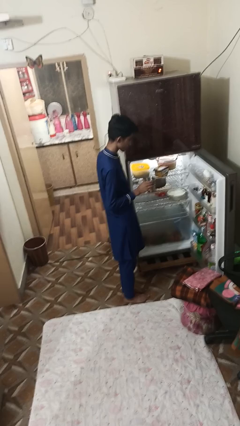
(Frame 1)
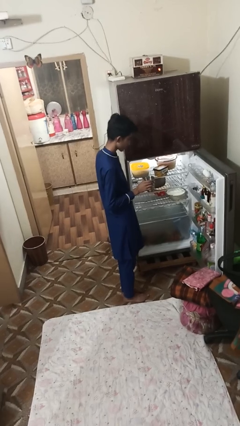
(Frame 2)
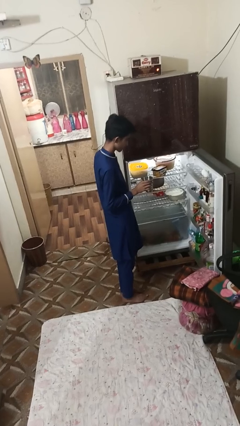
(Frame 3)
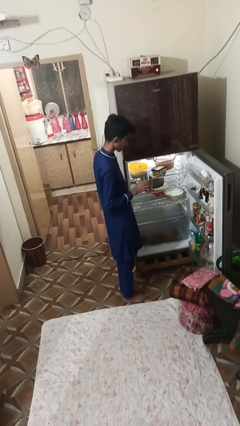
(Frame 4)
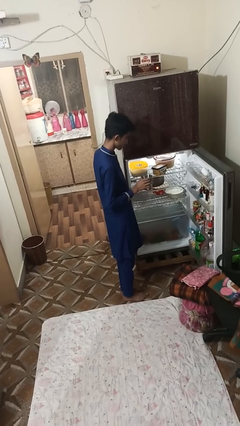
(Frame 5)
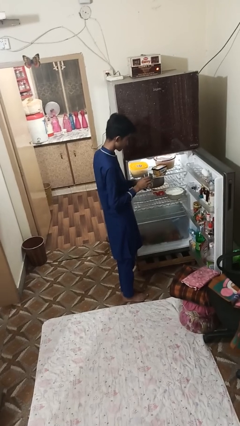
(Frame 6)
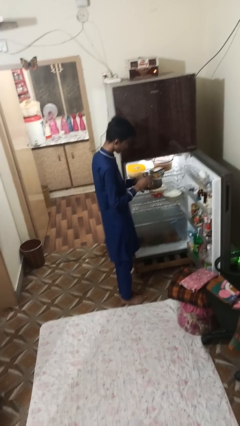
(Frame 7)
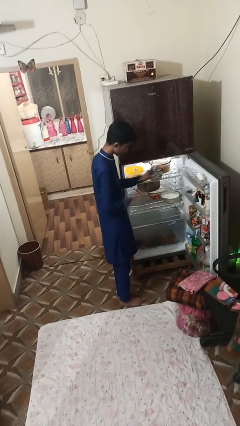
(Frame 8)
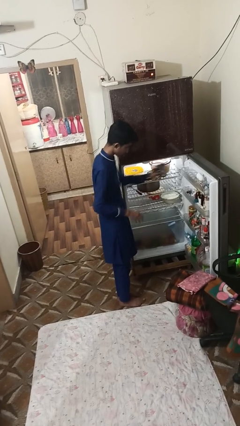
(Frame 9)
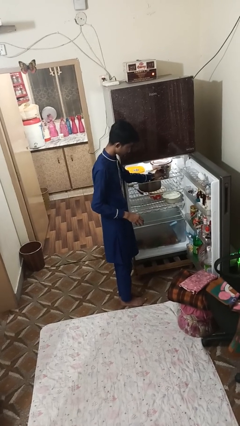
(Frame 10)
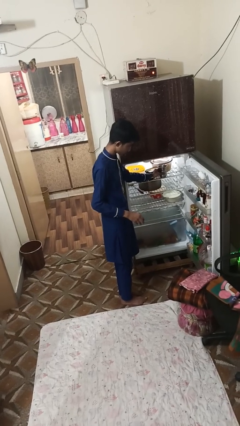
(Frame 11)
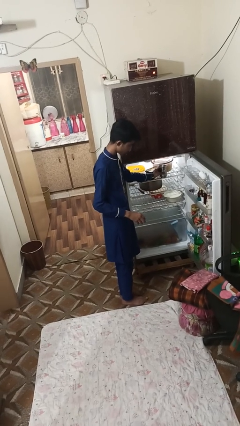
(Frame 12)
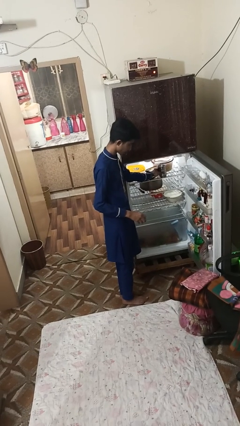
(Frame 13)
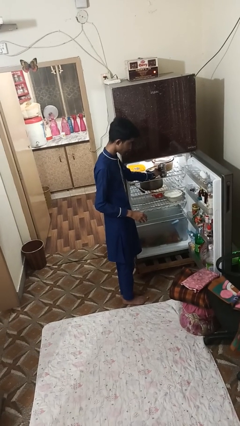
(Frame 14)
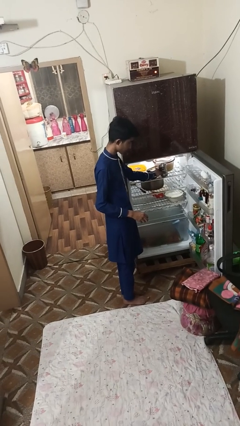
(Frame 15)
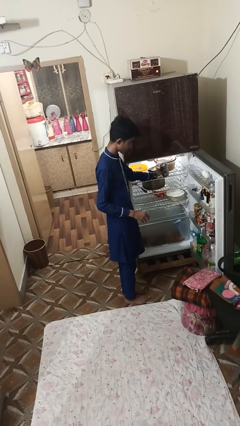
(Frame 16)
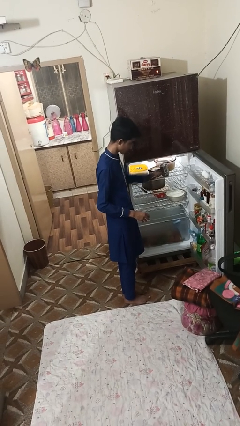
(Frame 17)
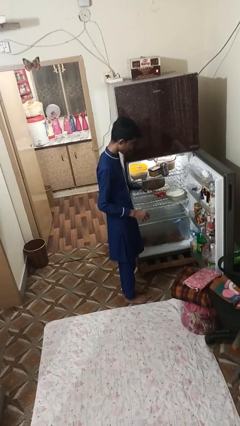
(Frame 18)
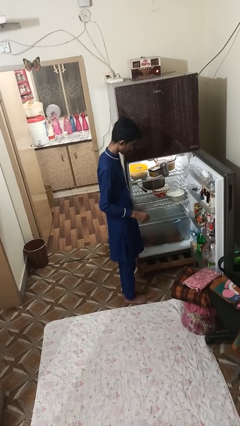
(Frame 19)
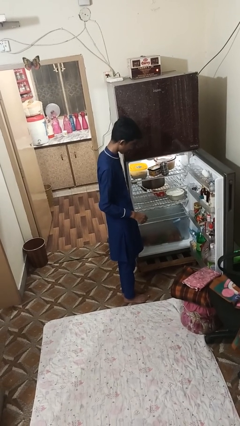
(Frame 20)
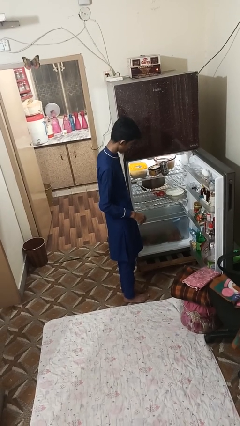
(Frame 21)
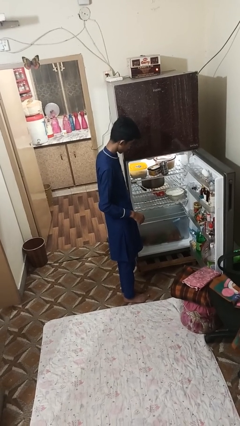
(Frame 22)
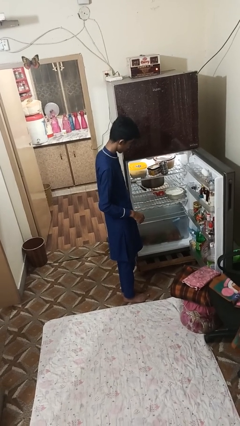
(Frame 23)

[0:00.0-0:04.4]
person puts object into refrigerator

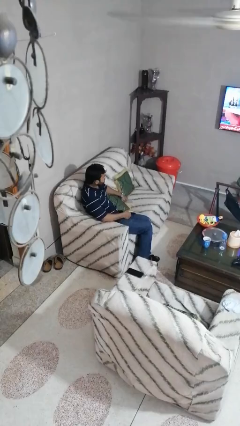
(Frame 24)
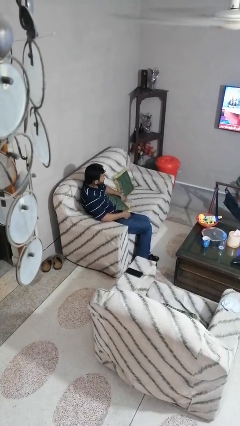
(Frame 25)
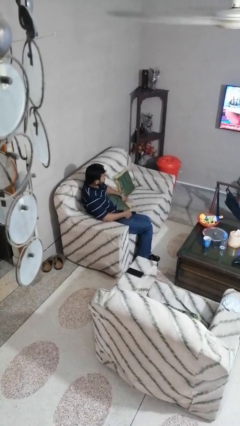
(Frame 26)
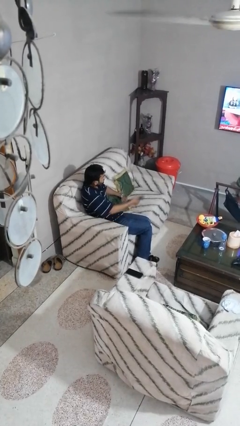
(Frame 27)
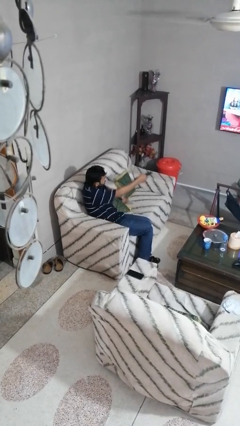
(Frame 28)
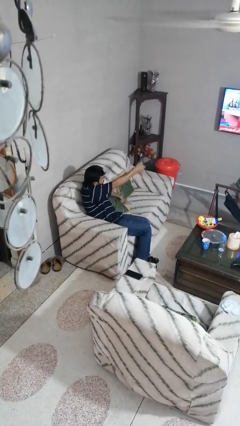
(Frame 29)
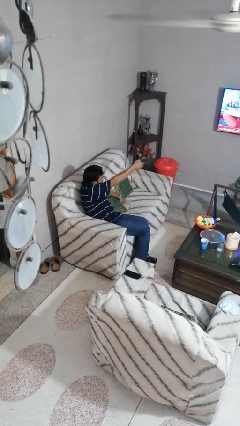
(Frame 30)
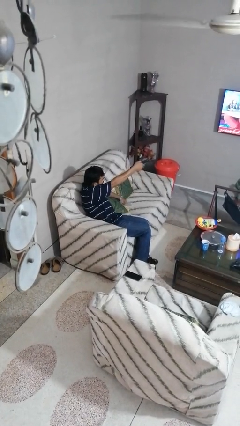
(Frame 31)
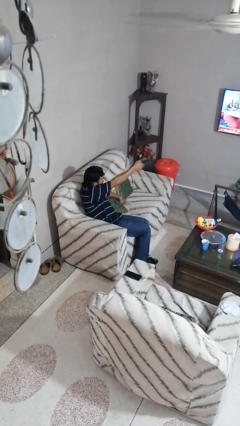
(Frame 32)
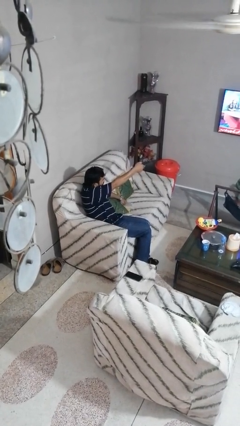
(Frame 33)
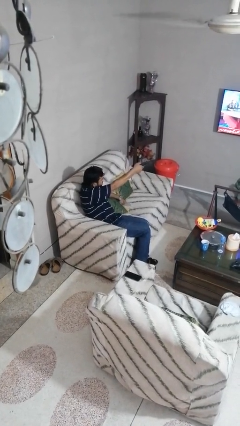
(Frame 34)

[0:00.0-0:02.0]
person uses television remote

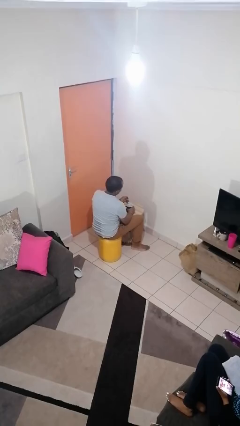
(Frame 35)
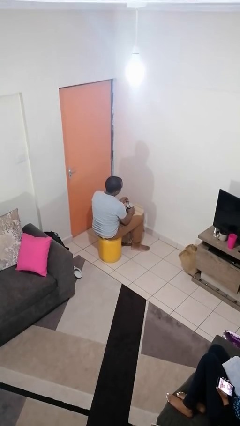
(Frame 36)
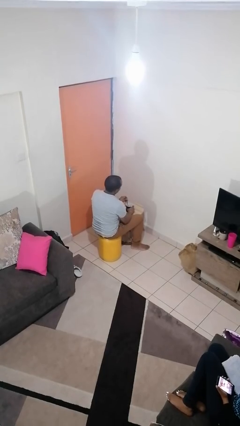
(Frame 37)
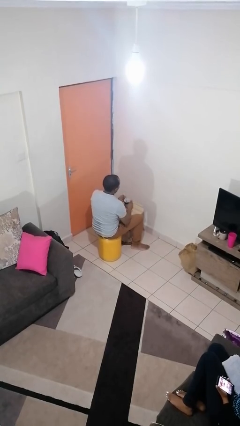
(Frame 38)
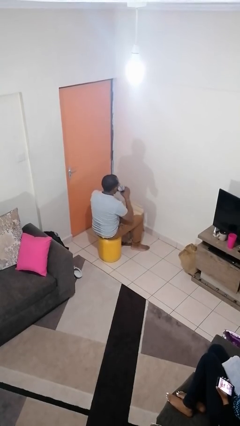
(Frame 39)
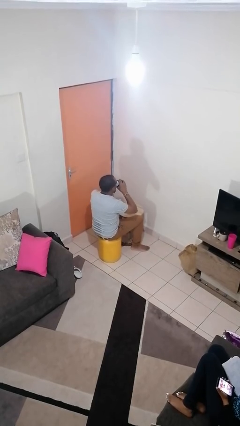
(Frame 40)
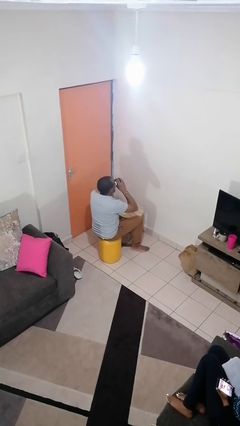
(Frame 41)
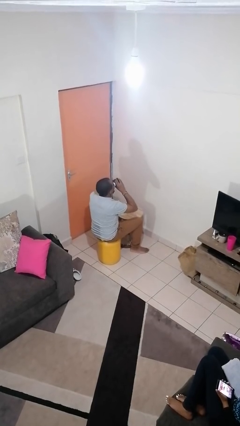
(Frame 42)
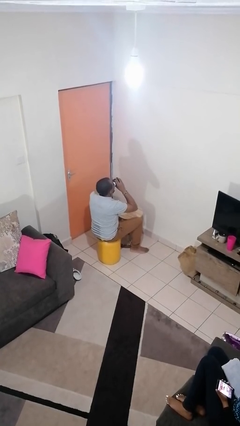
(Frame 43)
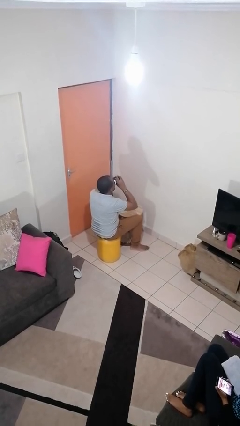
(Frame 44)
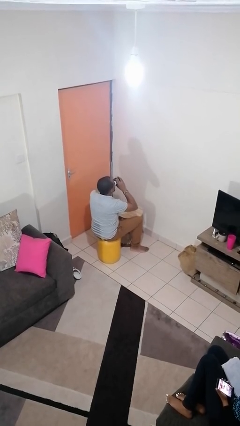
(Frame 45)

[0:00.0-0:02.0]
person drinks from mug

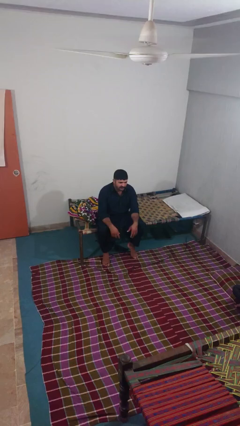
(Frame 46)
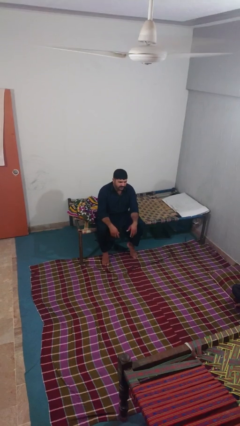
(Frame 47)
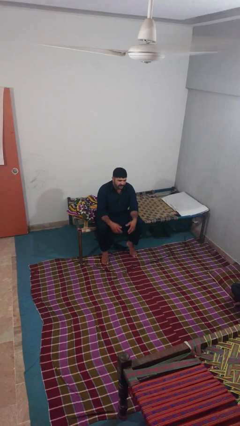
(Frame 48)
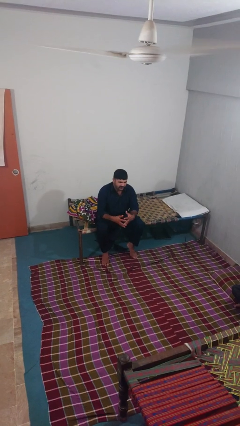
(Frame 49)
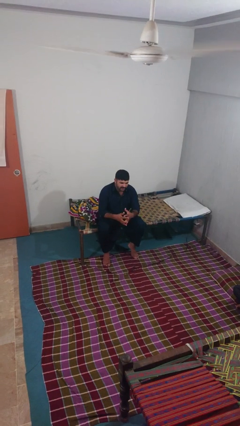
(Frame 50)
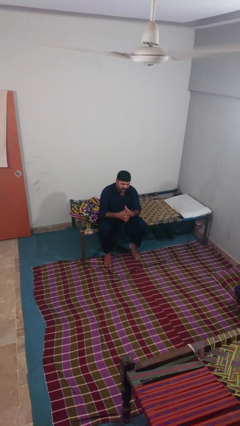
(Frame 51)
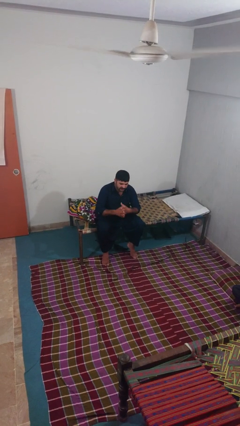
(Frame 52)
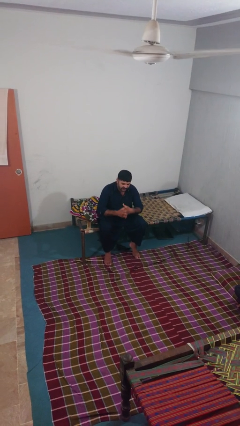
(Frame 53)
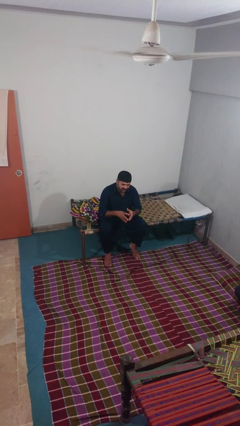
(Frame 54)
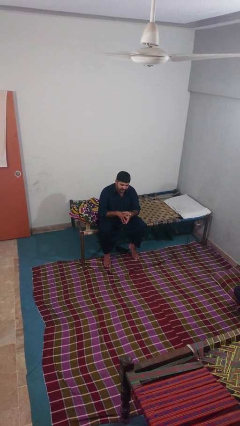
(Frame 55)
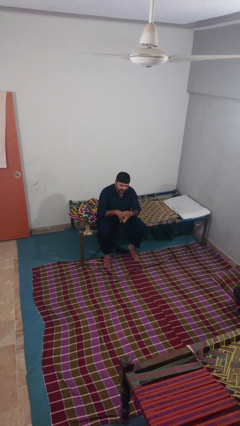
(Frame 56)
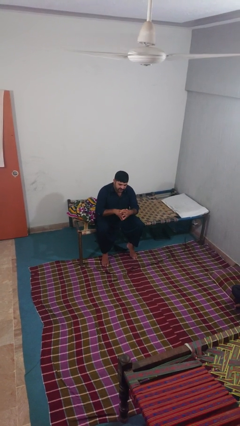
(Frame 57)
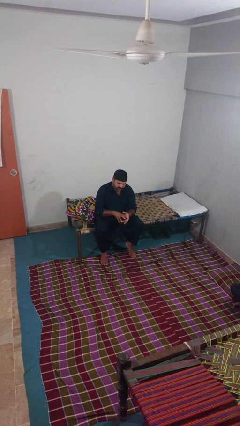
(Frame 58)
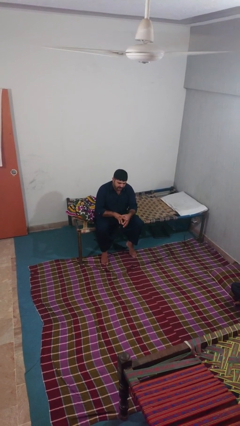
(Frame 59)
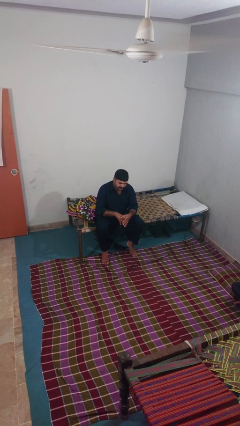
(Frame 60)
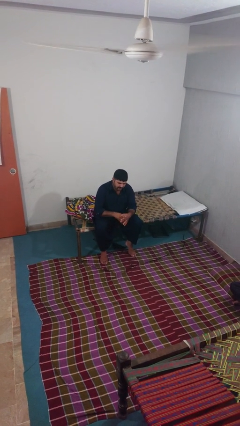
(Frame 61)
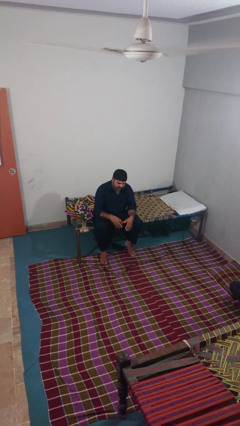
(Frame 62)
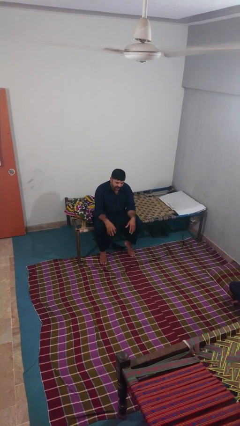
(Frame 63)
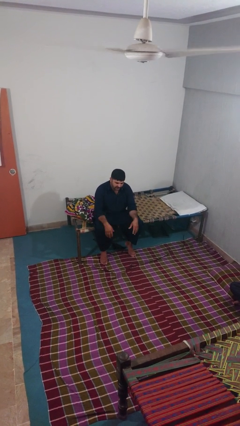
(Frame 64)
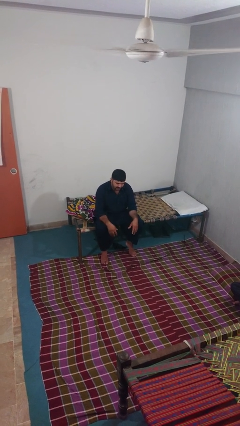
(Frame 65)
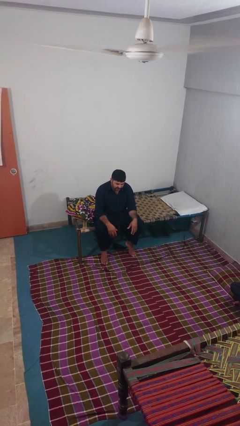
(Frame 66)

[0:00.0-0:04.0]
person cracks knuckles

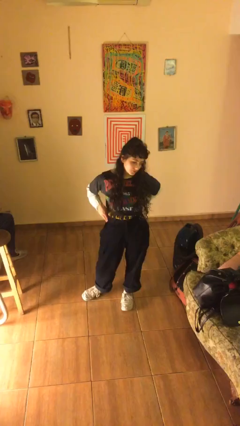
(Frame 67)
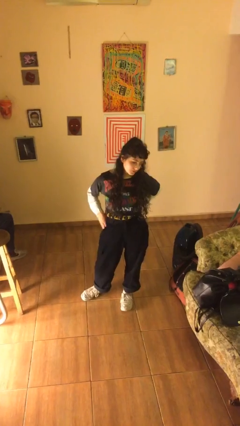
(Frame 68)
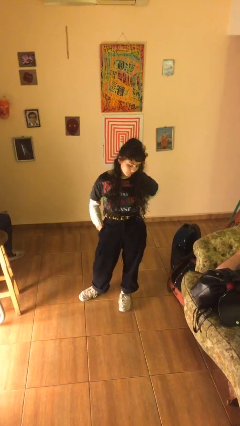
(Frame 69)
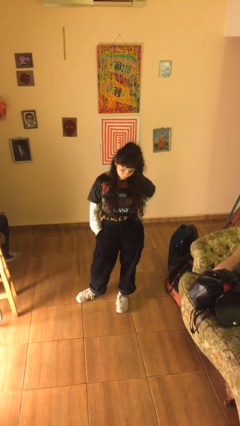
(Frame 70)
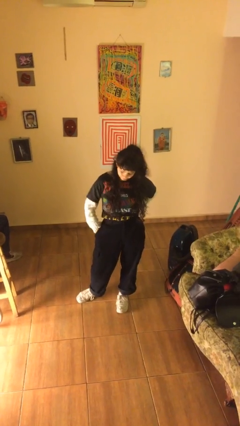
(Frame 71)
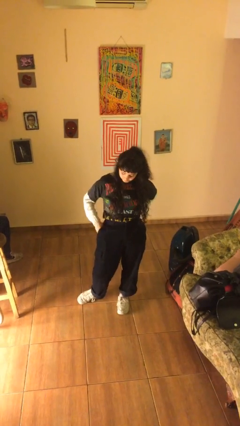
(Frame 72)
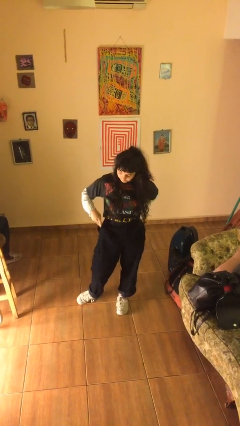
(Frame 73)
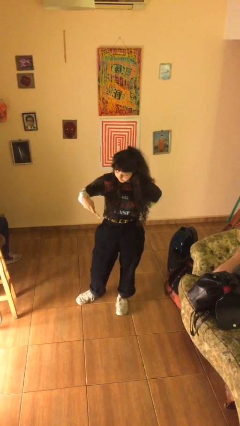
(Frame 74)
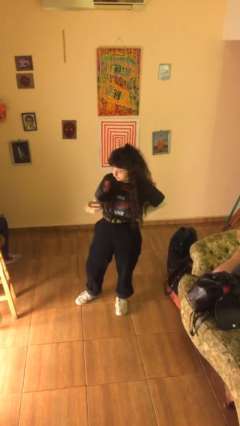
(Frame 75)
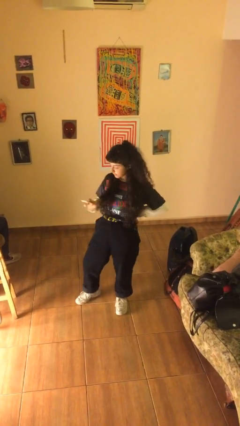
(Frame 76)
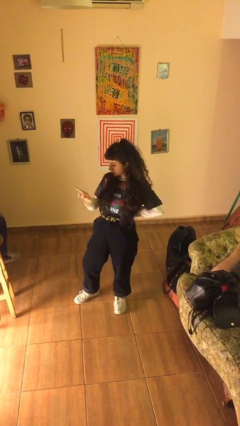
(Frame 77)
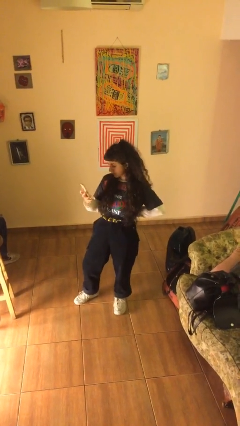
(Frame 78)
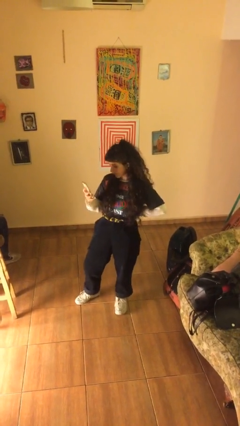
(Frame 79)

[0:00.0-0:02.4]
person takes phone from pocket

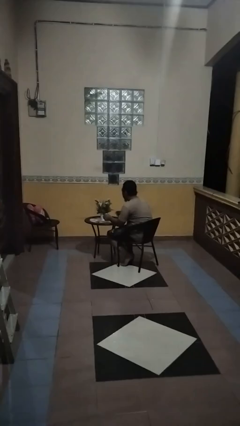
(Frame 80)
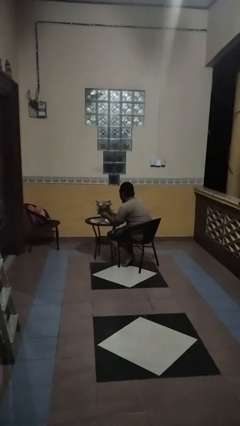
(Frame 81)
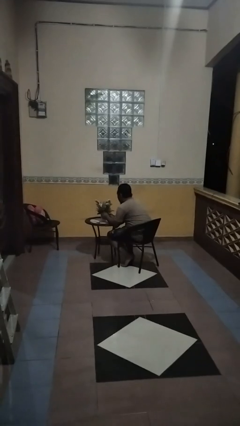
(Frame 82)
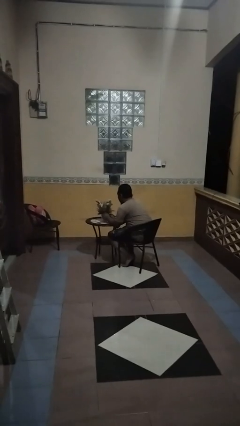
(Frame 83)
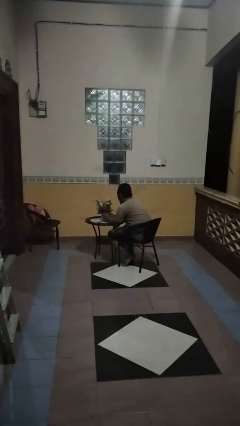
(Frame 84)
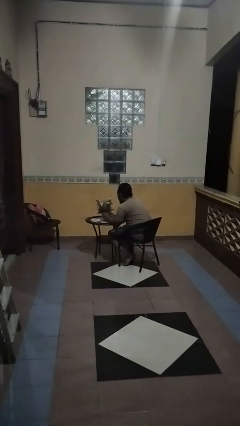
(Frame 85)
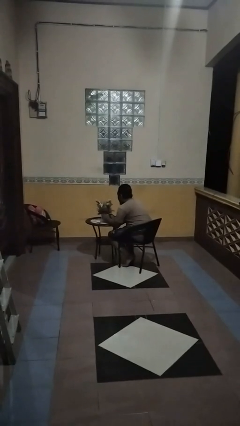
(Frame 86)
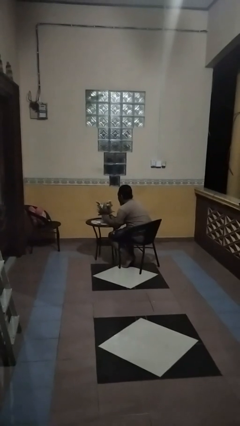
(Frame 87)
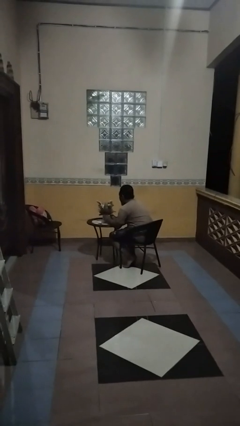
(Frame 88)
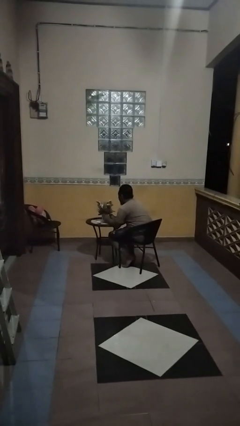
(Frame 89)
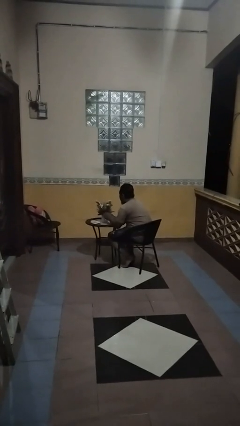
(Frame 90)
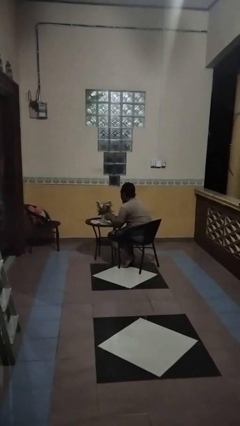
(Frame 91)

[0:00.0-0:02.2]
person arranges flowers in vase

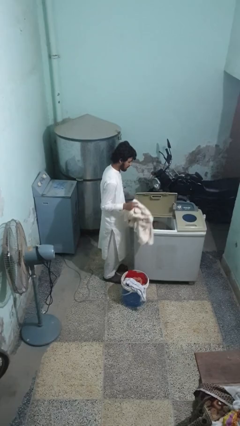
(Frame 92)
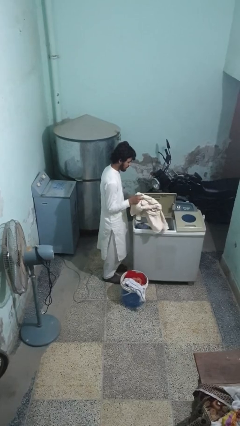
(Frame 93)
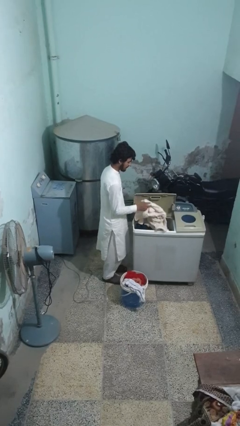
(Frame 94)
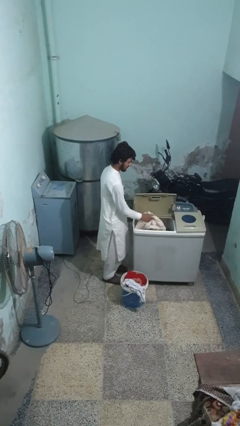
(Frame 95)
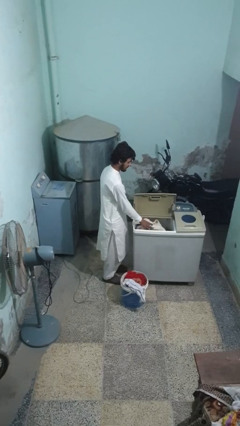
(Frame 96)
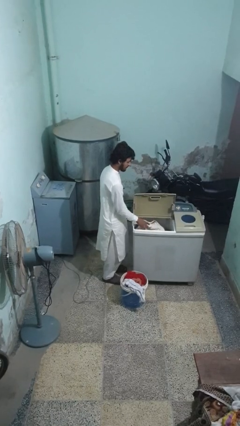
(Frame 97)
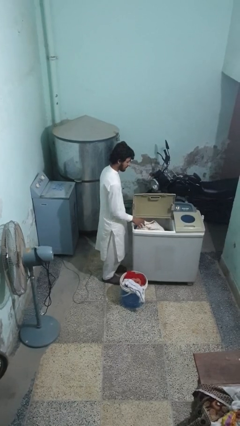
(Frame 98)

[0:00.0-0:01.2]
person loads clotheswasher
